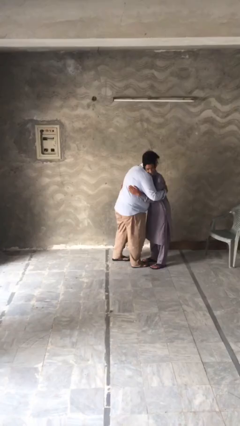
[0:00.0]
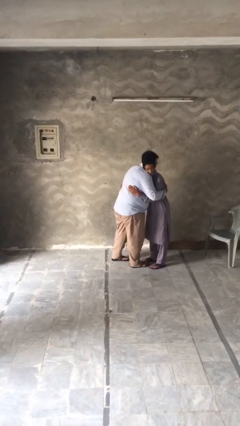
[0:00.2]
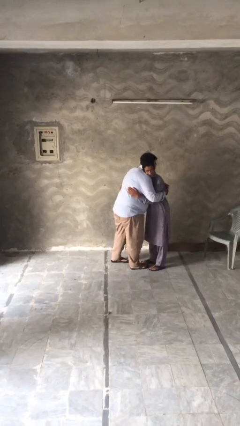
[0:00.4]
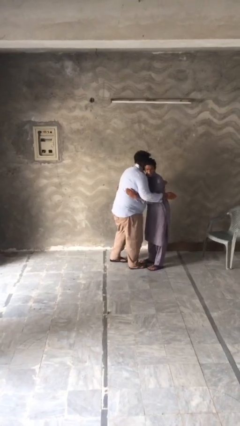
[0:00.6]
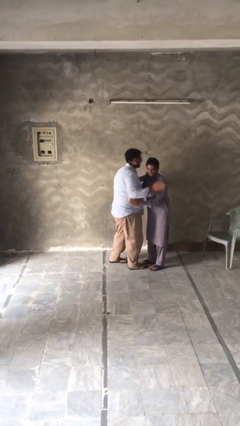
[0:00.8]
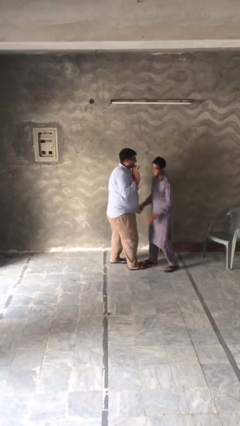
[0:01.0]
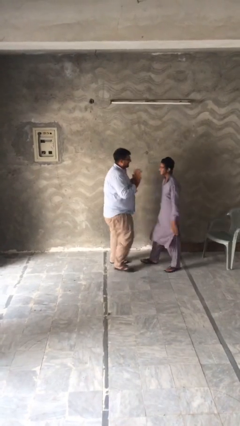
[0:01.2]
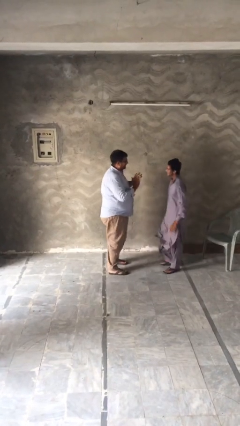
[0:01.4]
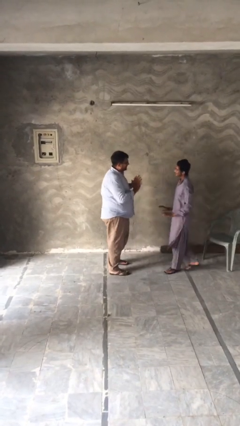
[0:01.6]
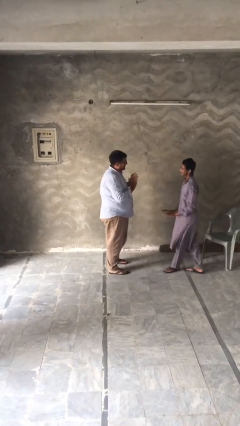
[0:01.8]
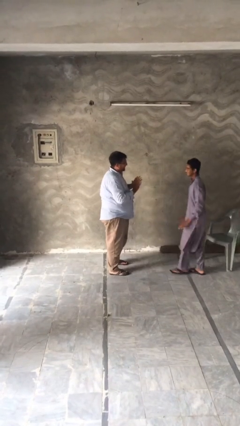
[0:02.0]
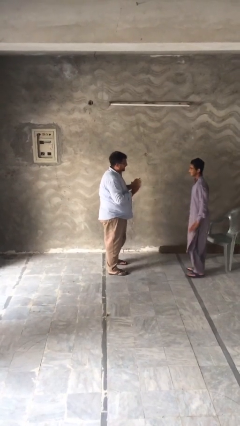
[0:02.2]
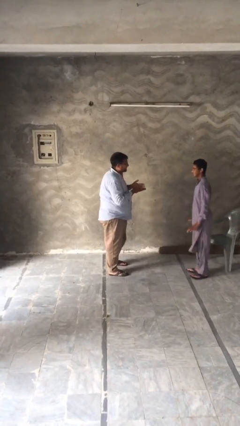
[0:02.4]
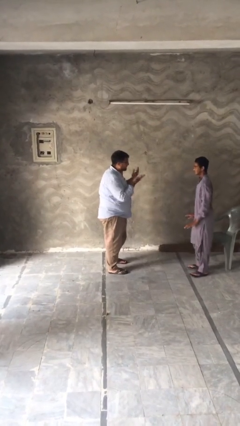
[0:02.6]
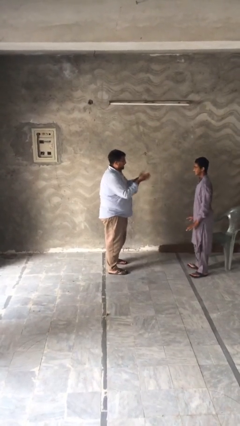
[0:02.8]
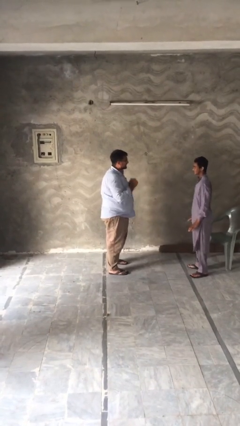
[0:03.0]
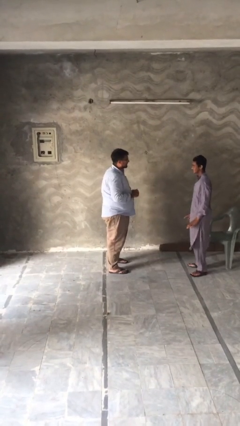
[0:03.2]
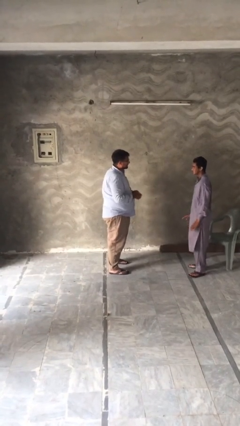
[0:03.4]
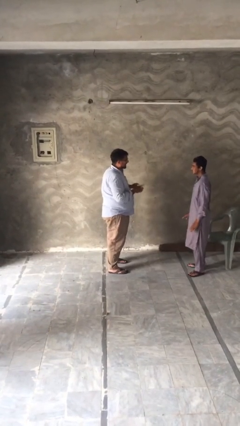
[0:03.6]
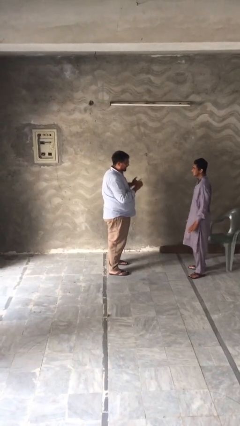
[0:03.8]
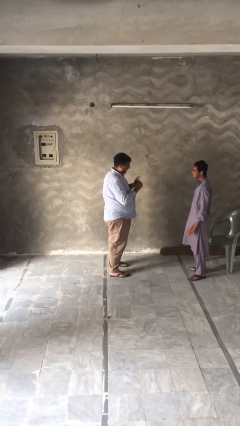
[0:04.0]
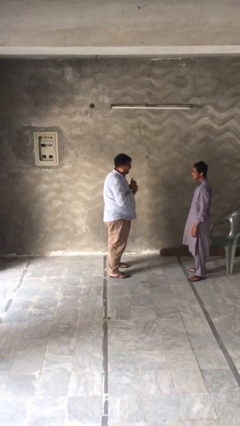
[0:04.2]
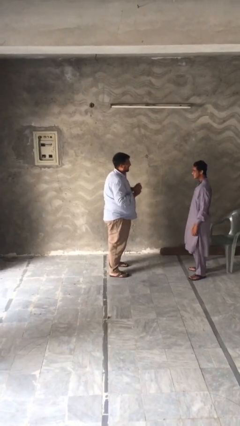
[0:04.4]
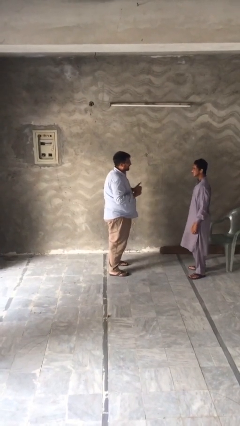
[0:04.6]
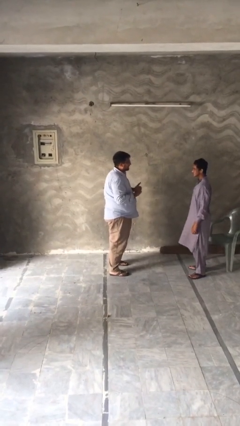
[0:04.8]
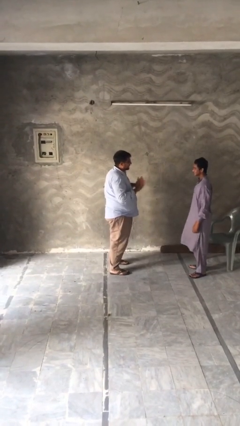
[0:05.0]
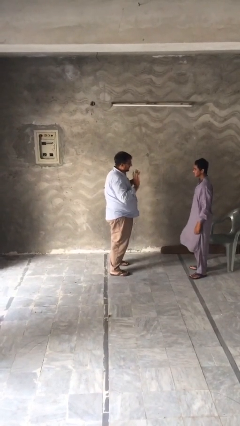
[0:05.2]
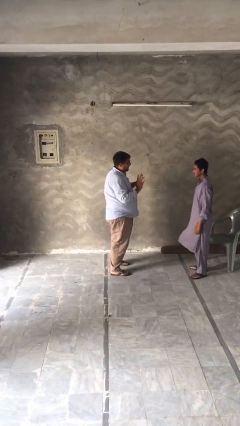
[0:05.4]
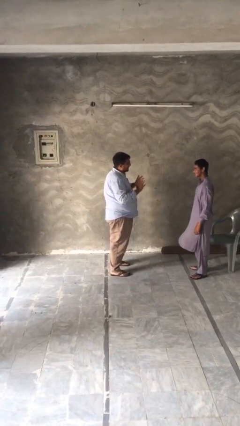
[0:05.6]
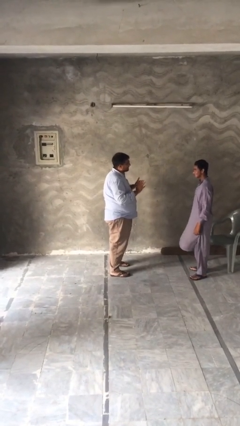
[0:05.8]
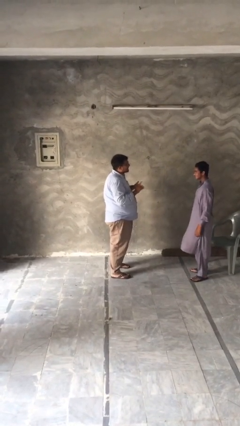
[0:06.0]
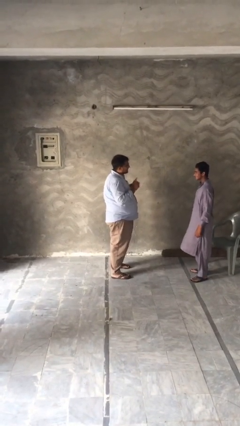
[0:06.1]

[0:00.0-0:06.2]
person talks to person

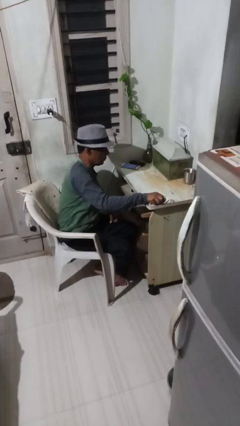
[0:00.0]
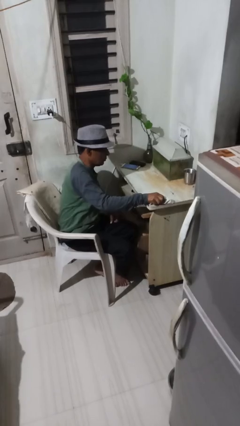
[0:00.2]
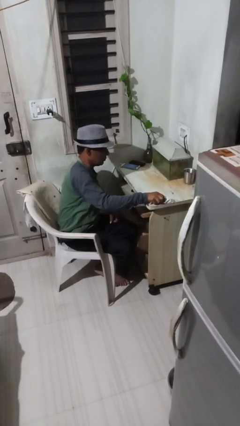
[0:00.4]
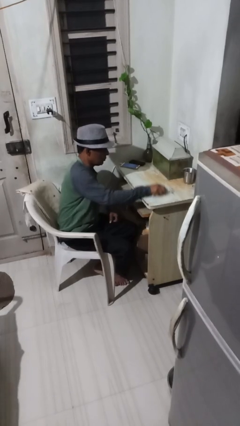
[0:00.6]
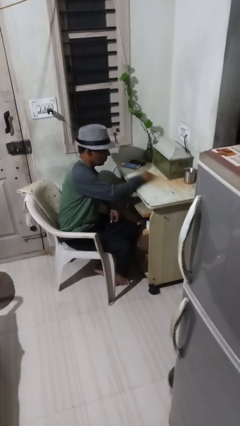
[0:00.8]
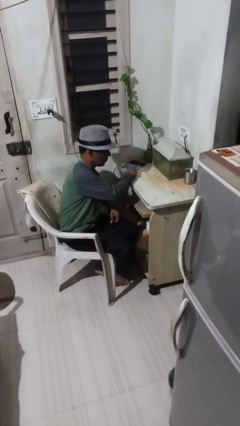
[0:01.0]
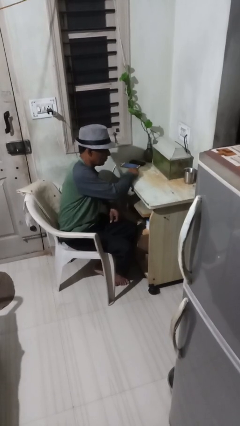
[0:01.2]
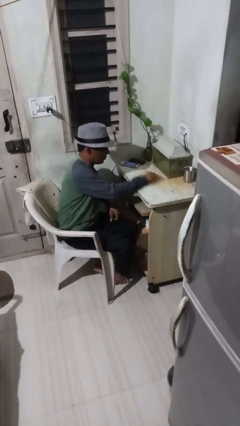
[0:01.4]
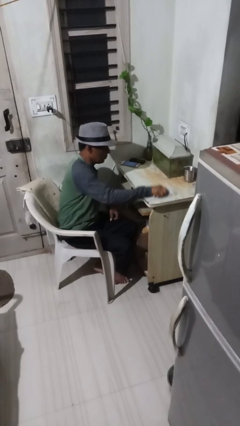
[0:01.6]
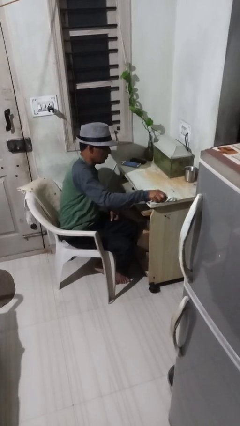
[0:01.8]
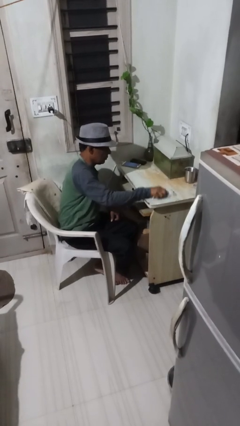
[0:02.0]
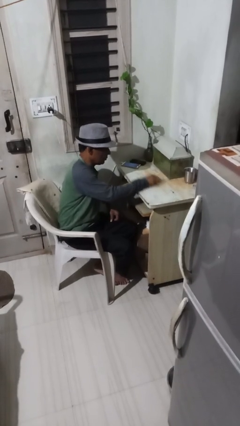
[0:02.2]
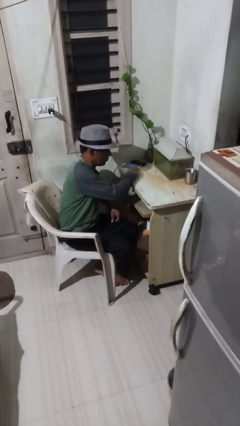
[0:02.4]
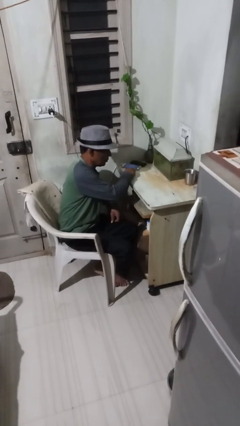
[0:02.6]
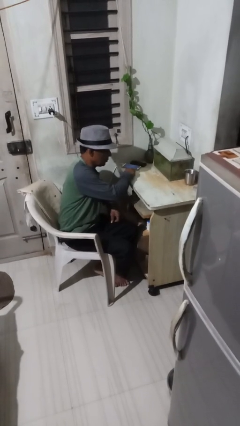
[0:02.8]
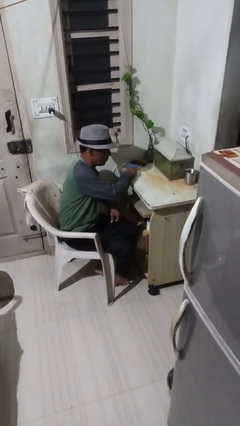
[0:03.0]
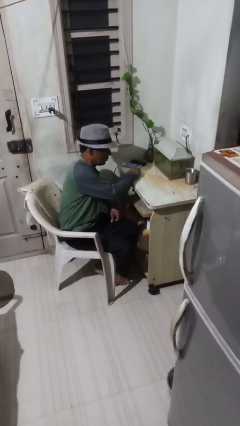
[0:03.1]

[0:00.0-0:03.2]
person cleans table with rag

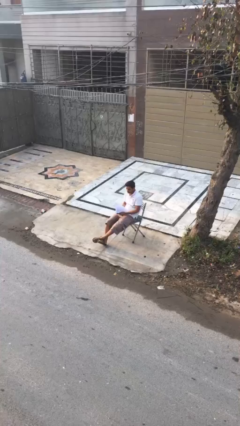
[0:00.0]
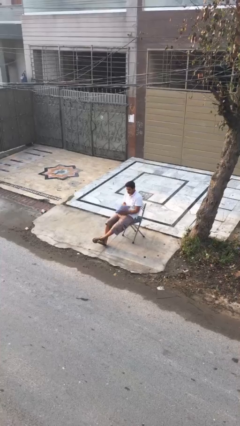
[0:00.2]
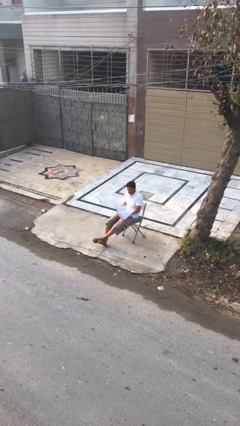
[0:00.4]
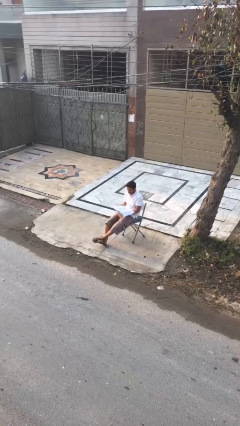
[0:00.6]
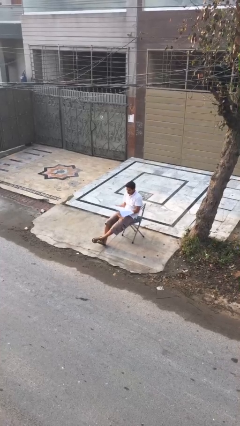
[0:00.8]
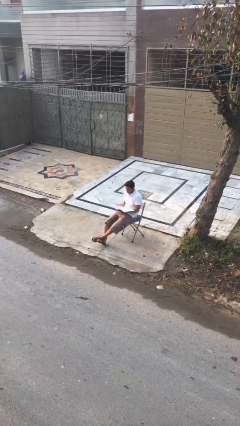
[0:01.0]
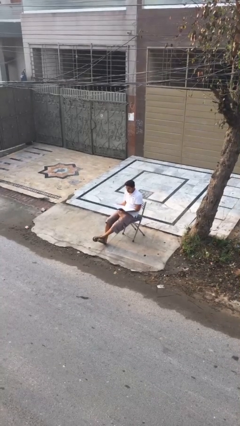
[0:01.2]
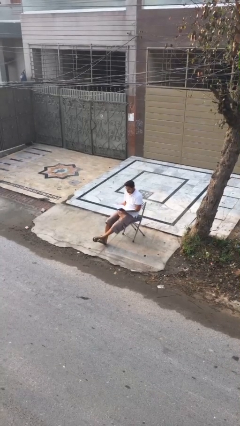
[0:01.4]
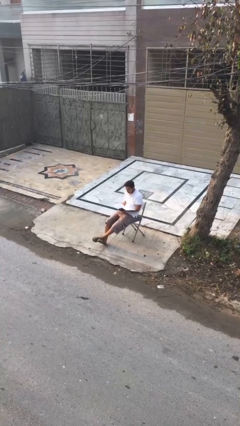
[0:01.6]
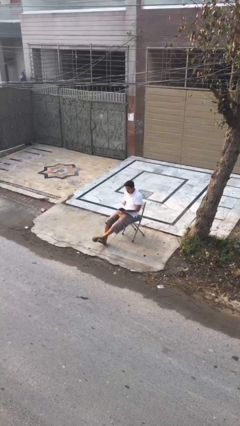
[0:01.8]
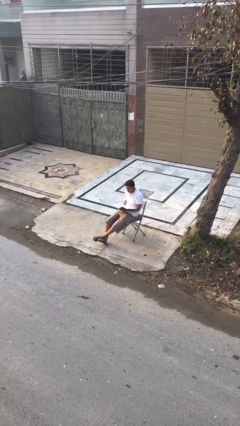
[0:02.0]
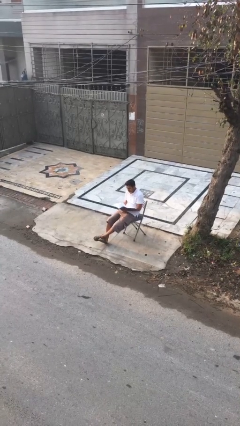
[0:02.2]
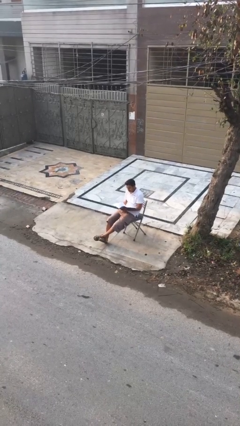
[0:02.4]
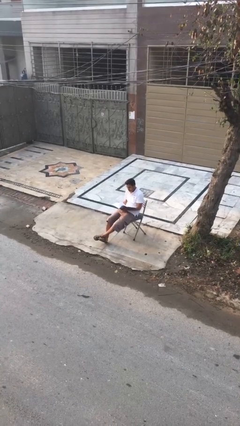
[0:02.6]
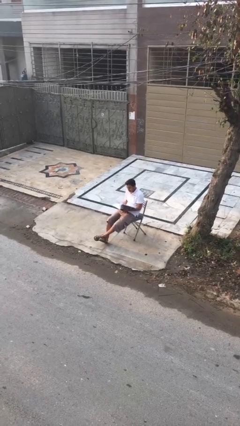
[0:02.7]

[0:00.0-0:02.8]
person reads document

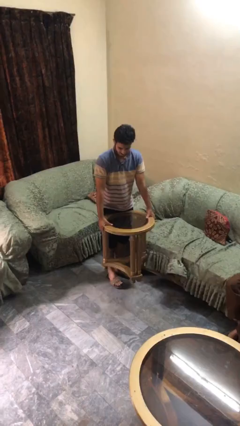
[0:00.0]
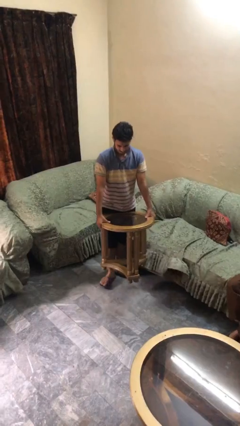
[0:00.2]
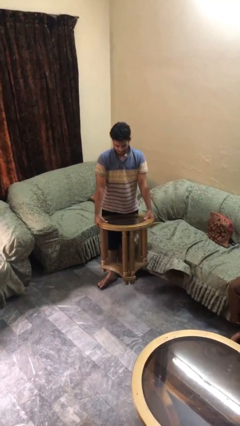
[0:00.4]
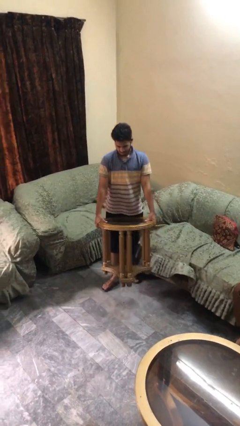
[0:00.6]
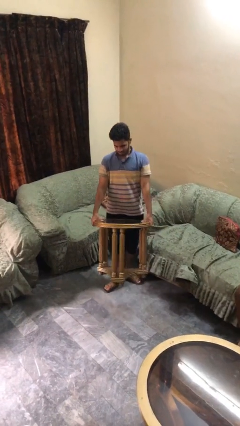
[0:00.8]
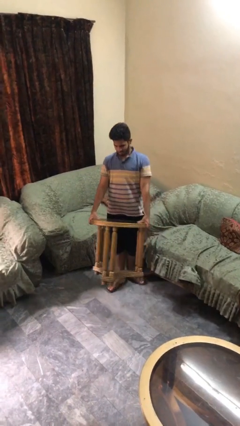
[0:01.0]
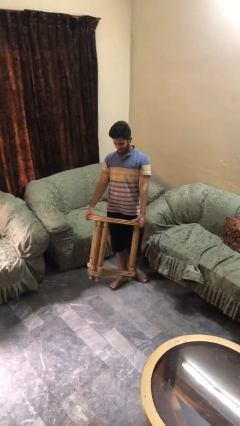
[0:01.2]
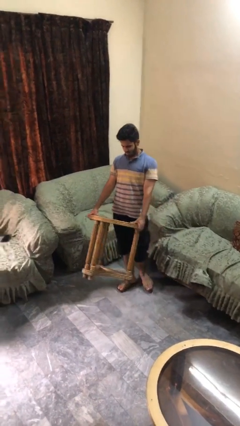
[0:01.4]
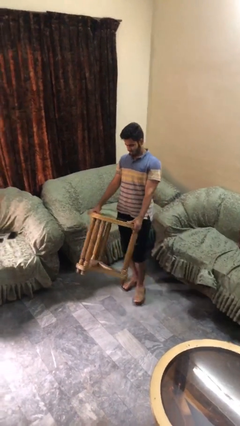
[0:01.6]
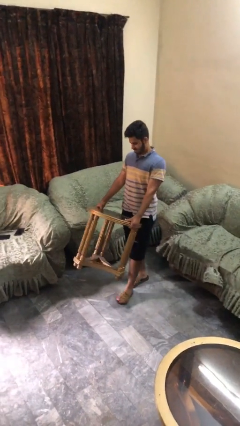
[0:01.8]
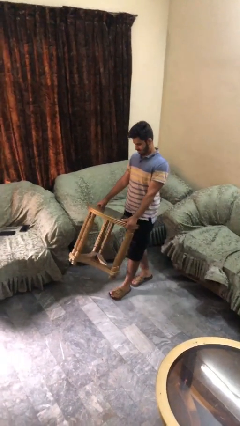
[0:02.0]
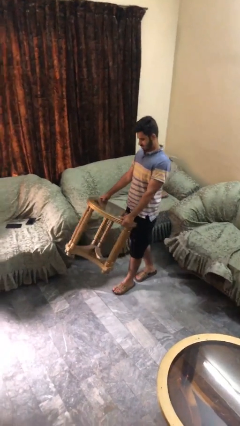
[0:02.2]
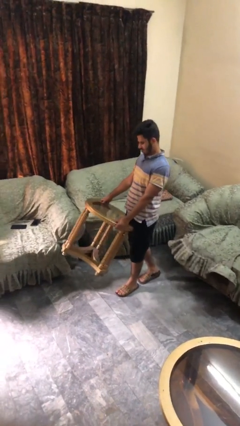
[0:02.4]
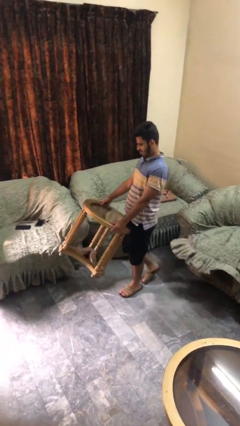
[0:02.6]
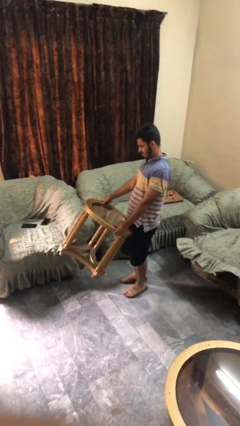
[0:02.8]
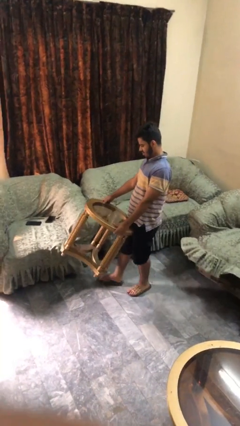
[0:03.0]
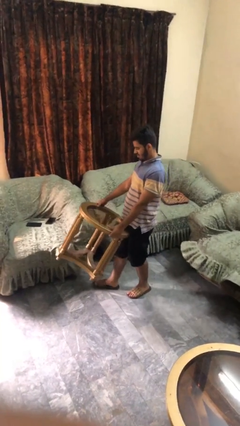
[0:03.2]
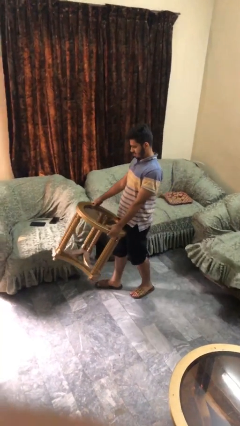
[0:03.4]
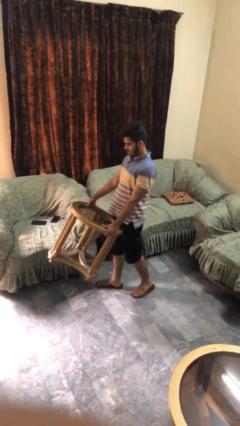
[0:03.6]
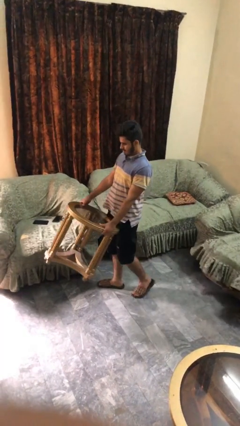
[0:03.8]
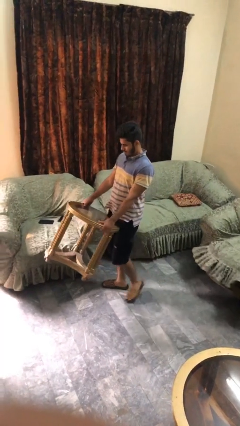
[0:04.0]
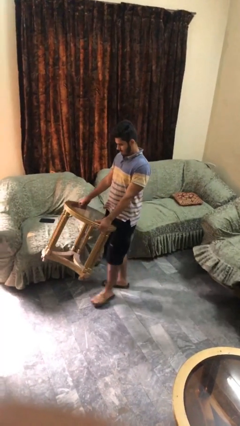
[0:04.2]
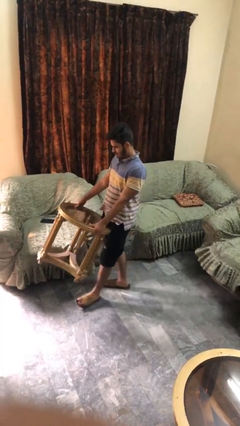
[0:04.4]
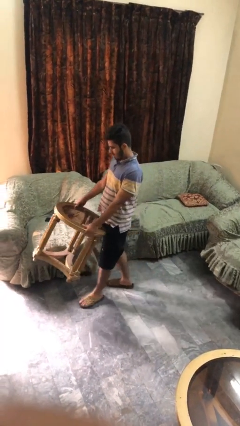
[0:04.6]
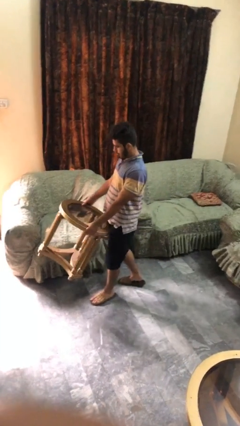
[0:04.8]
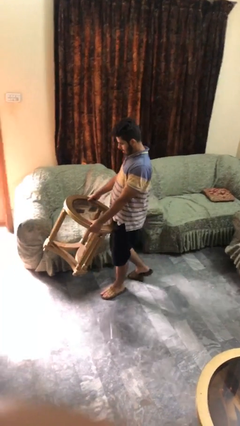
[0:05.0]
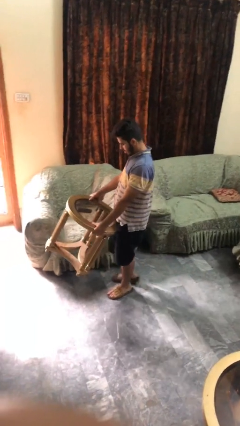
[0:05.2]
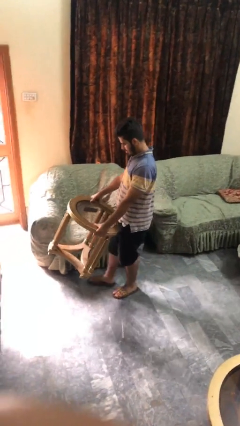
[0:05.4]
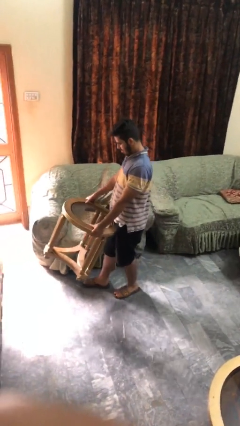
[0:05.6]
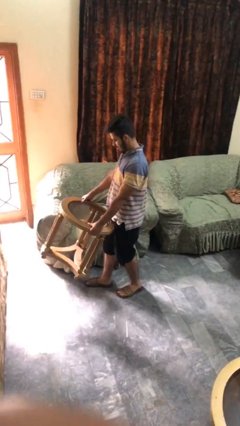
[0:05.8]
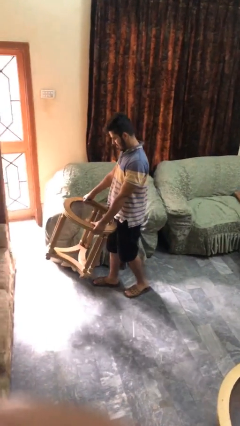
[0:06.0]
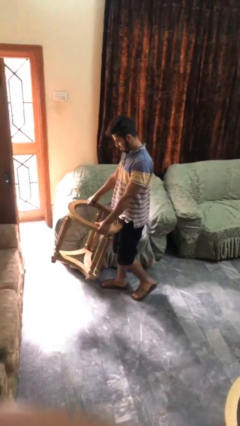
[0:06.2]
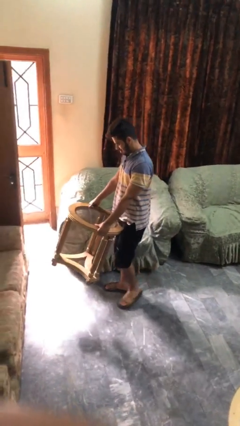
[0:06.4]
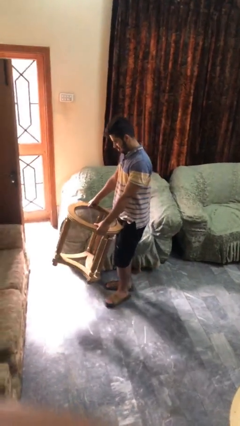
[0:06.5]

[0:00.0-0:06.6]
person carries heavy object
